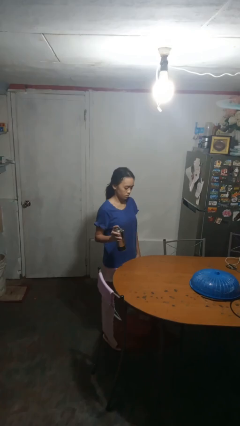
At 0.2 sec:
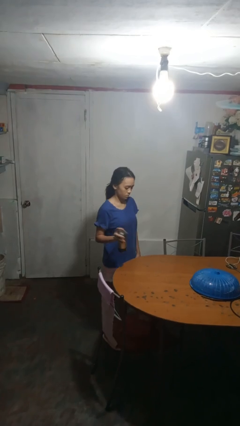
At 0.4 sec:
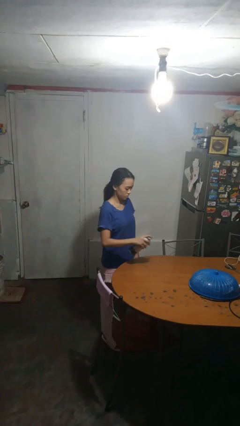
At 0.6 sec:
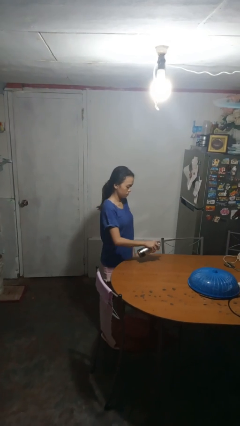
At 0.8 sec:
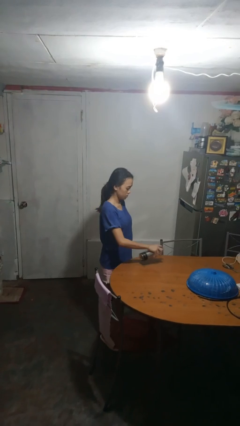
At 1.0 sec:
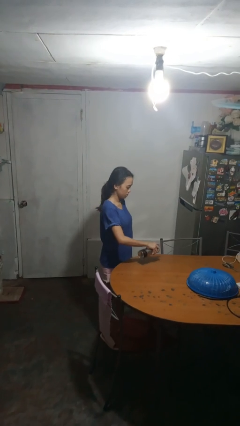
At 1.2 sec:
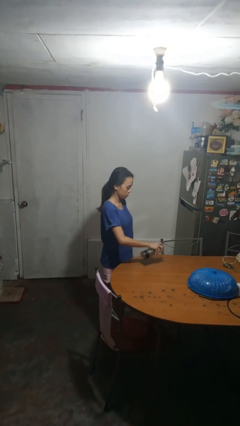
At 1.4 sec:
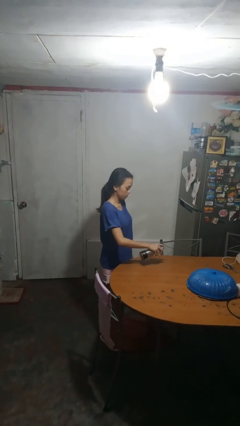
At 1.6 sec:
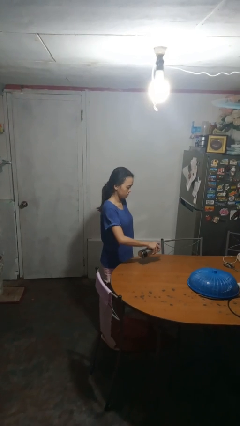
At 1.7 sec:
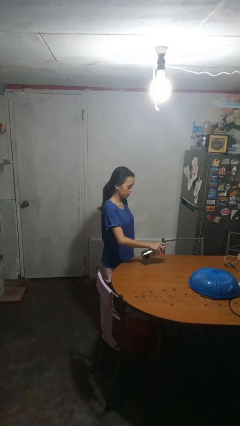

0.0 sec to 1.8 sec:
person sprays from bottle

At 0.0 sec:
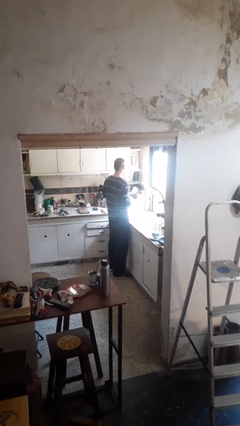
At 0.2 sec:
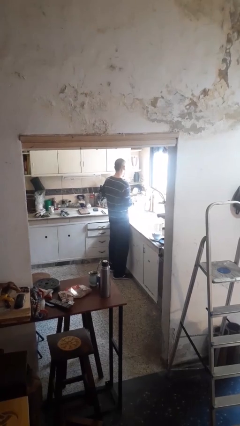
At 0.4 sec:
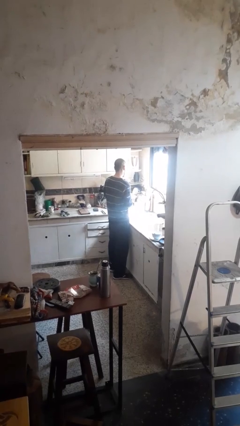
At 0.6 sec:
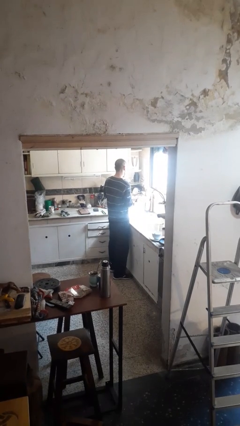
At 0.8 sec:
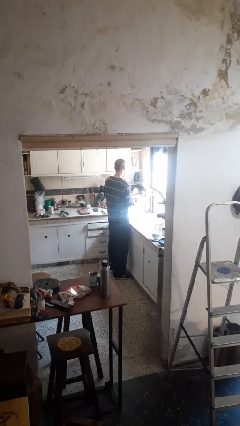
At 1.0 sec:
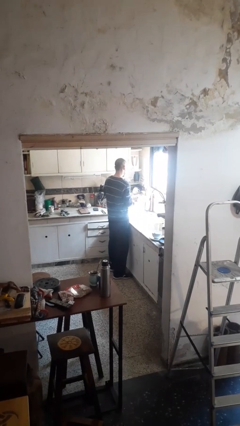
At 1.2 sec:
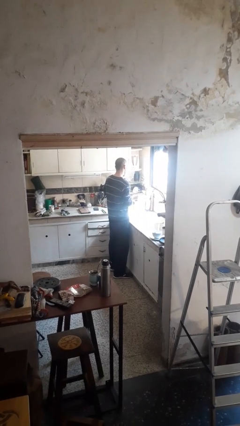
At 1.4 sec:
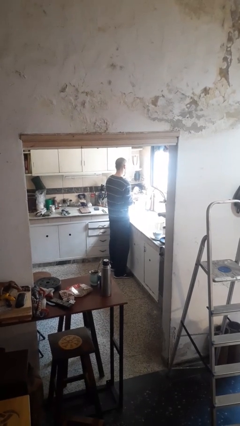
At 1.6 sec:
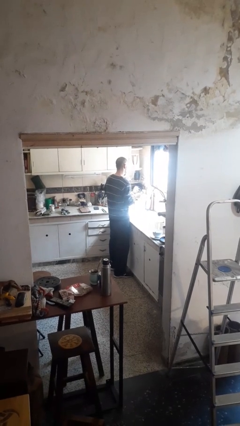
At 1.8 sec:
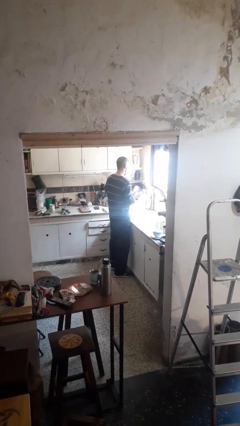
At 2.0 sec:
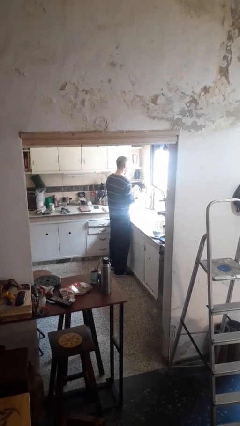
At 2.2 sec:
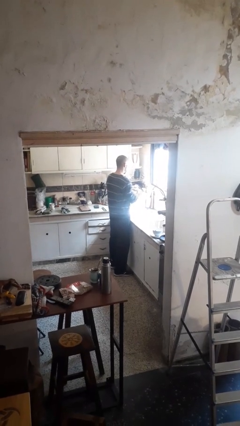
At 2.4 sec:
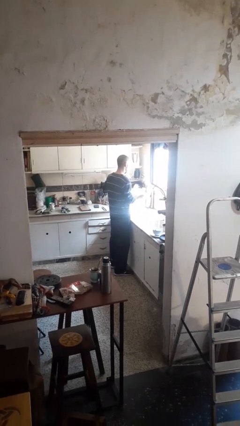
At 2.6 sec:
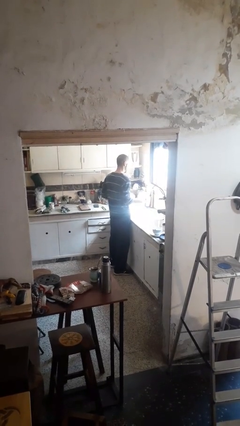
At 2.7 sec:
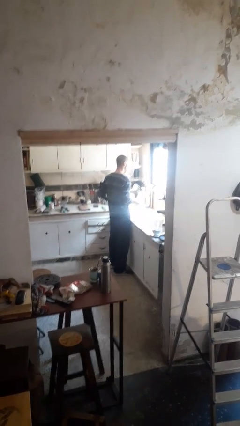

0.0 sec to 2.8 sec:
person washes dish

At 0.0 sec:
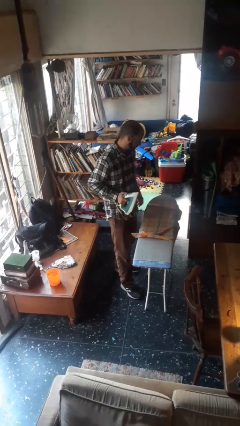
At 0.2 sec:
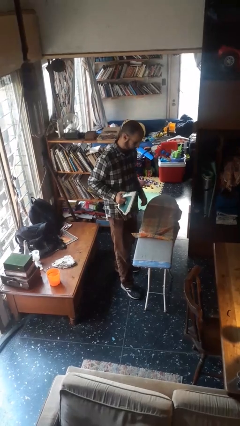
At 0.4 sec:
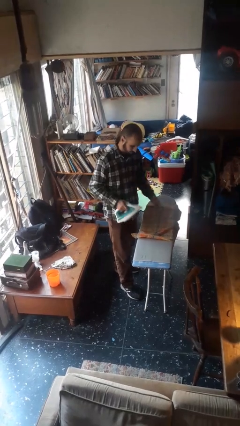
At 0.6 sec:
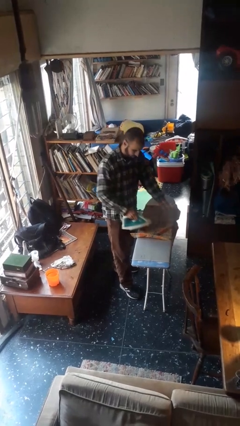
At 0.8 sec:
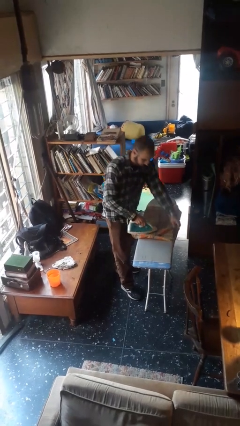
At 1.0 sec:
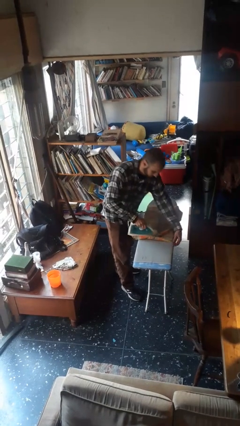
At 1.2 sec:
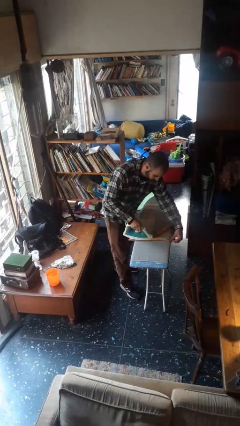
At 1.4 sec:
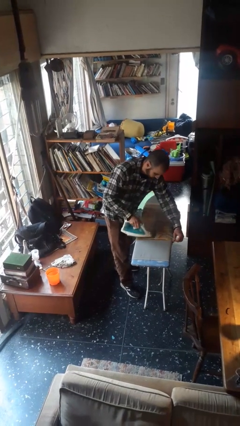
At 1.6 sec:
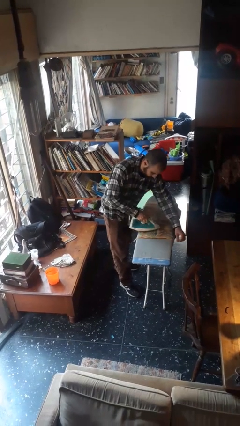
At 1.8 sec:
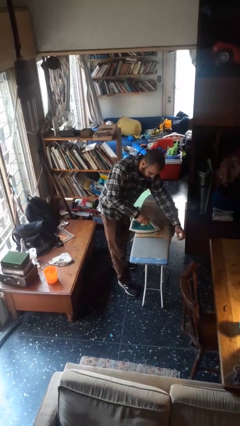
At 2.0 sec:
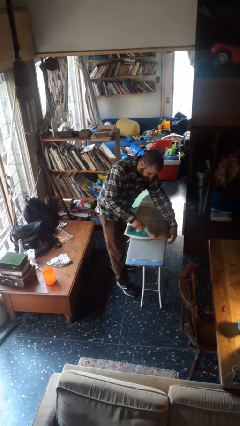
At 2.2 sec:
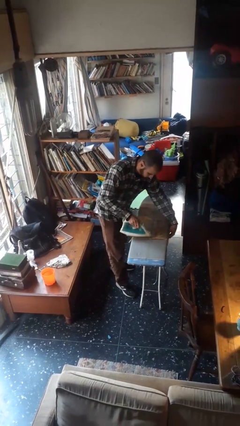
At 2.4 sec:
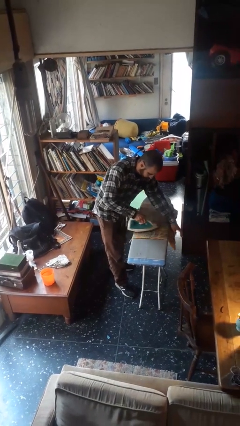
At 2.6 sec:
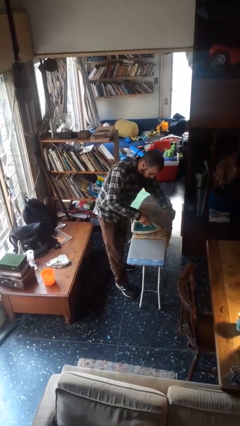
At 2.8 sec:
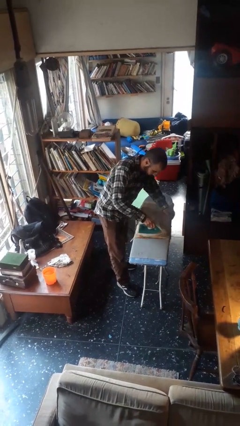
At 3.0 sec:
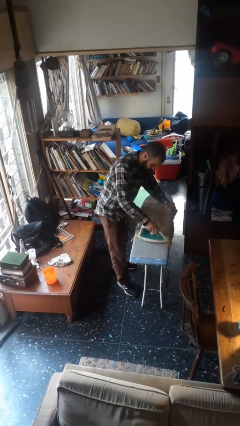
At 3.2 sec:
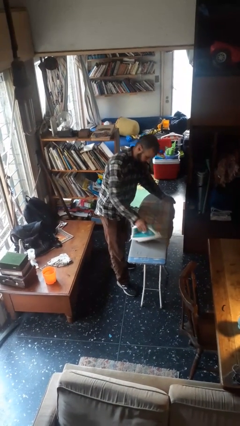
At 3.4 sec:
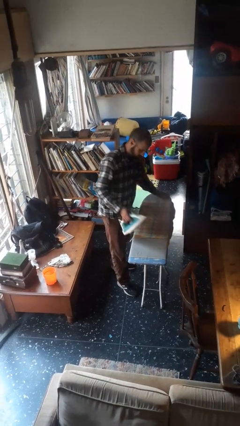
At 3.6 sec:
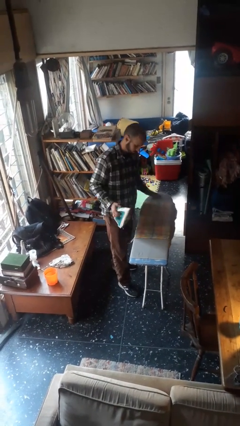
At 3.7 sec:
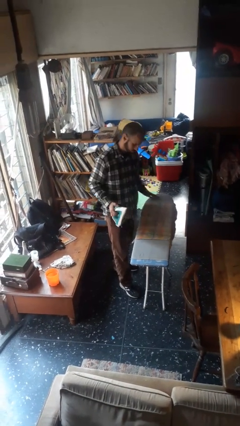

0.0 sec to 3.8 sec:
person irons clothes

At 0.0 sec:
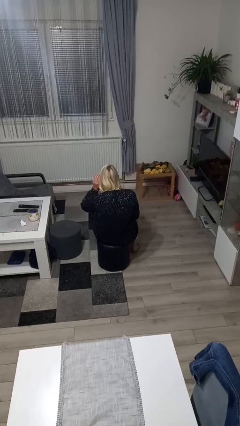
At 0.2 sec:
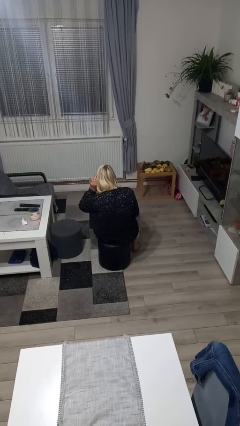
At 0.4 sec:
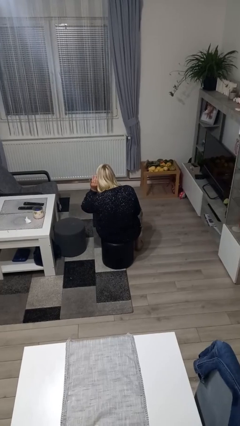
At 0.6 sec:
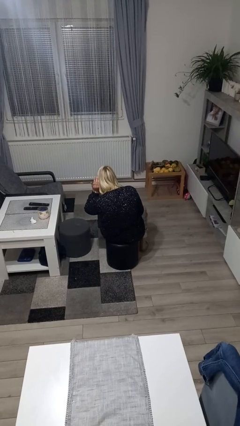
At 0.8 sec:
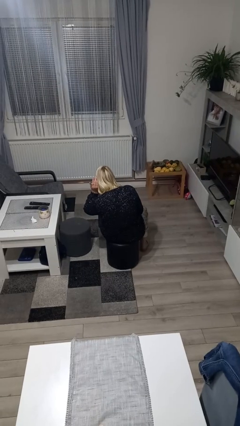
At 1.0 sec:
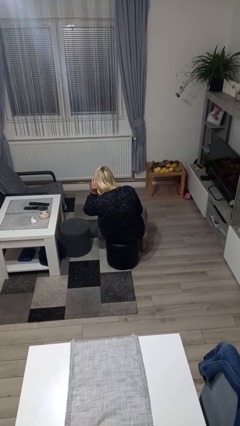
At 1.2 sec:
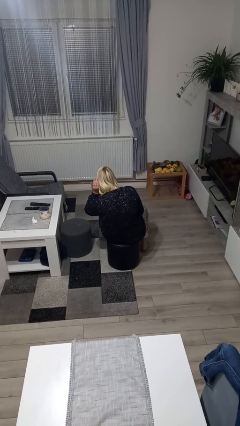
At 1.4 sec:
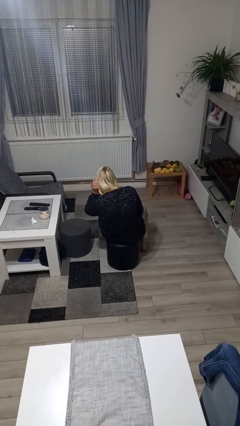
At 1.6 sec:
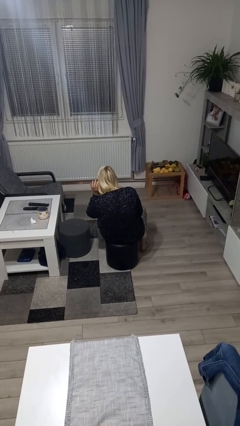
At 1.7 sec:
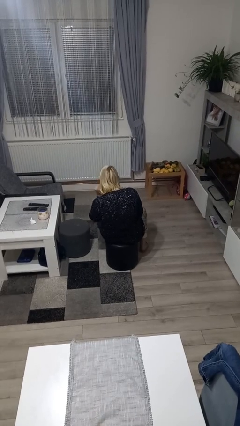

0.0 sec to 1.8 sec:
person gestures listen closely

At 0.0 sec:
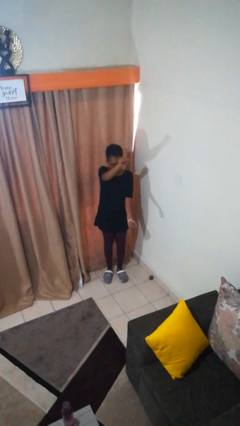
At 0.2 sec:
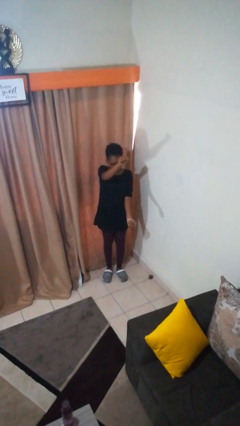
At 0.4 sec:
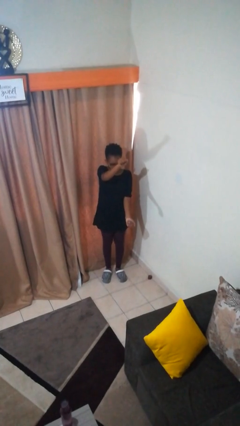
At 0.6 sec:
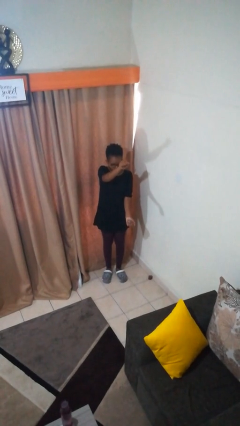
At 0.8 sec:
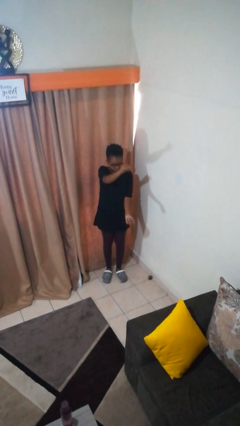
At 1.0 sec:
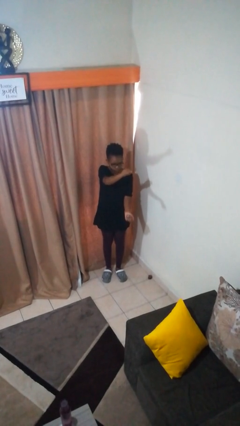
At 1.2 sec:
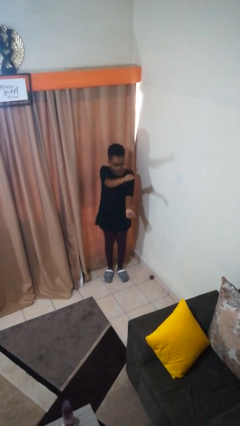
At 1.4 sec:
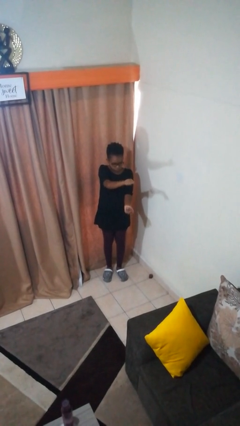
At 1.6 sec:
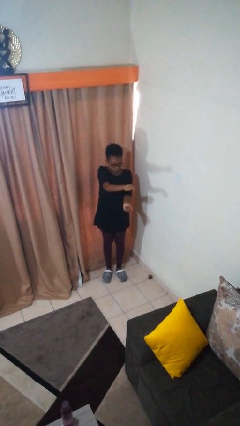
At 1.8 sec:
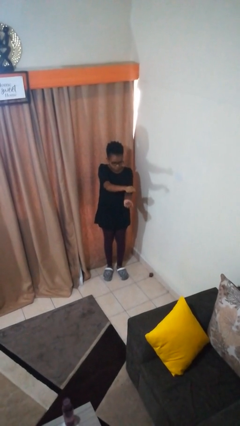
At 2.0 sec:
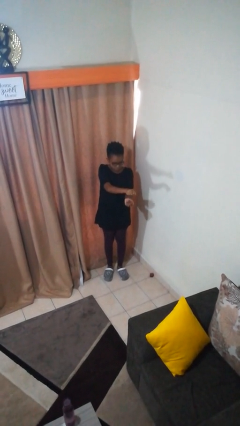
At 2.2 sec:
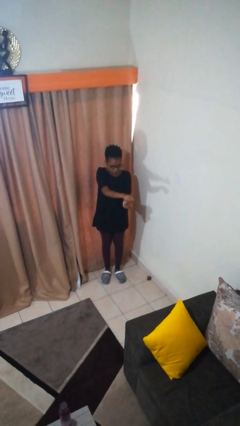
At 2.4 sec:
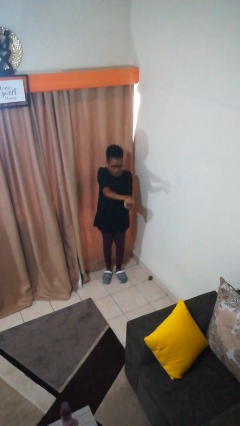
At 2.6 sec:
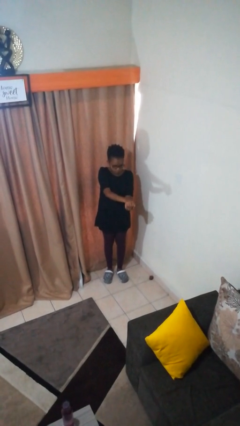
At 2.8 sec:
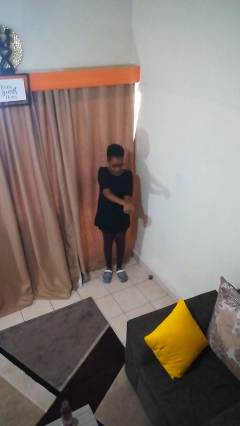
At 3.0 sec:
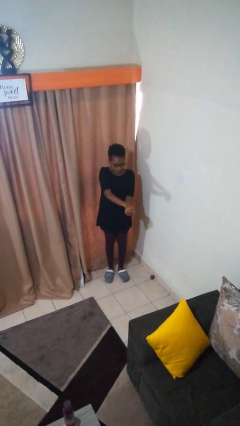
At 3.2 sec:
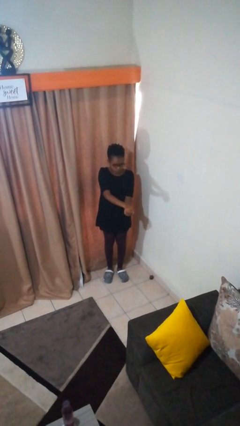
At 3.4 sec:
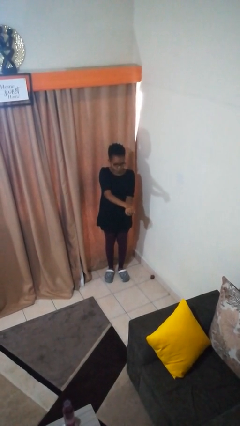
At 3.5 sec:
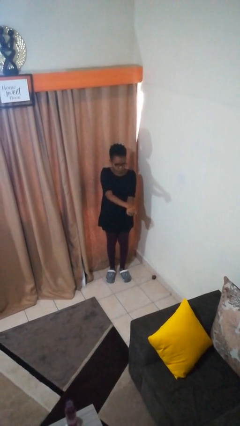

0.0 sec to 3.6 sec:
person gestures zoom out

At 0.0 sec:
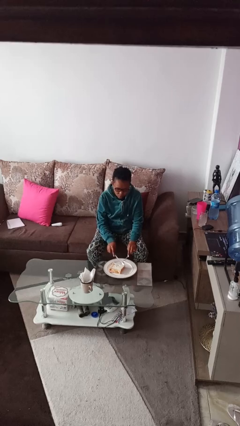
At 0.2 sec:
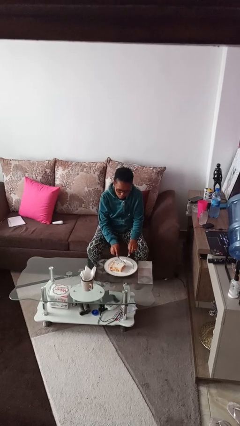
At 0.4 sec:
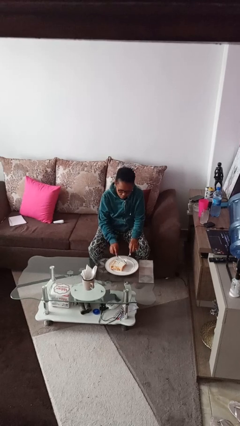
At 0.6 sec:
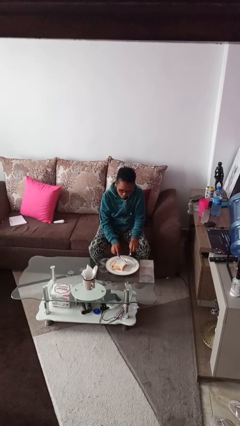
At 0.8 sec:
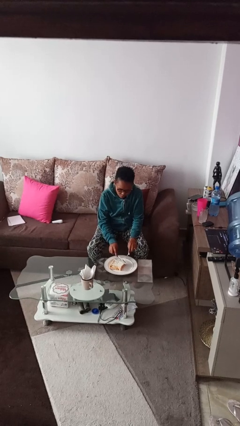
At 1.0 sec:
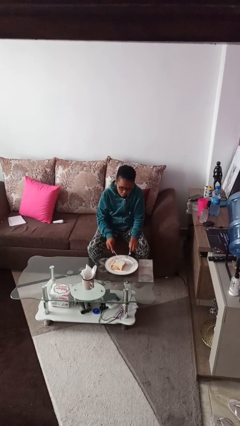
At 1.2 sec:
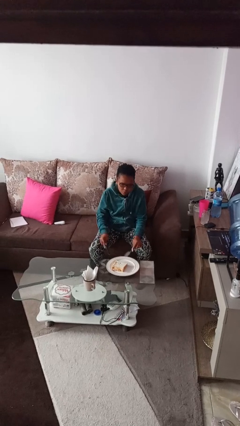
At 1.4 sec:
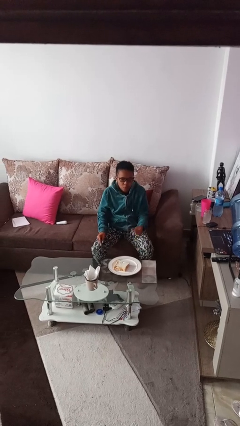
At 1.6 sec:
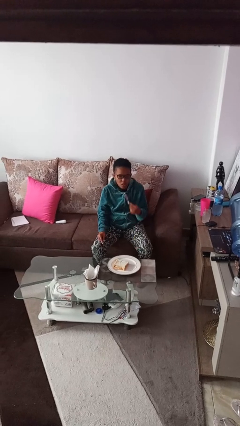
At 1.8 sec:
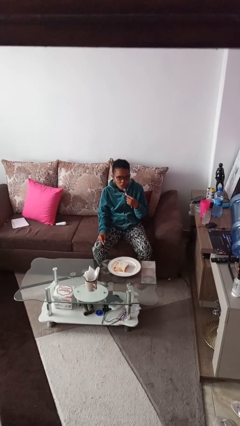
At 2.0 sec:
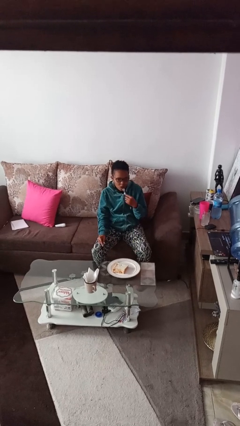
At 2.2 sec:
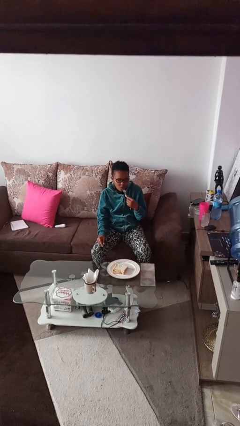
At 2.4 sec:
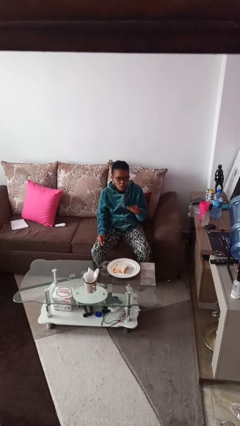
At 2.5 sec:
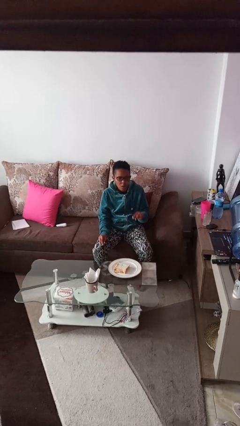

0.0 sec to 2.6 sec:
person eats with utensil

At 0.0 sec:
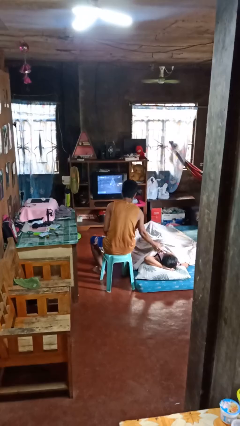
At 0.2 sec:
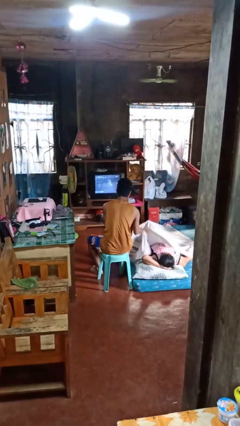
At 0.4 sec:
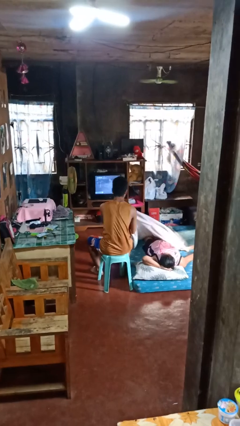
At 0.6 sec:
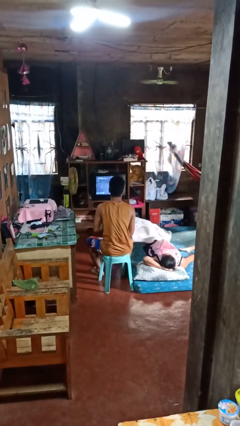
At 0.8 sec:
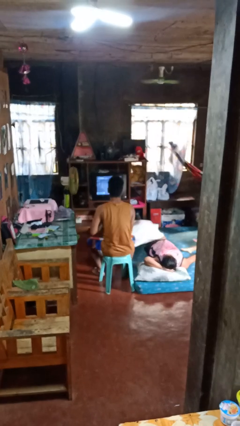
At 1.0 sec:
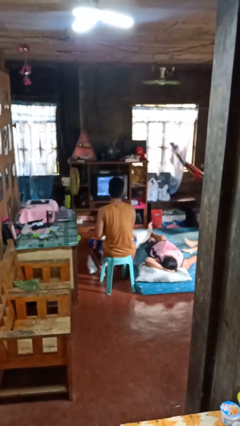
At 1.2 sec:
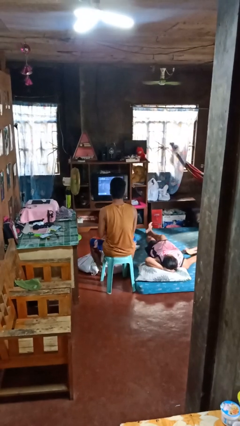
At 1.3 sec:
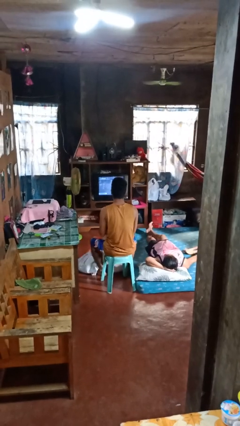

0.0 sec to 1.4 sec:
person uncovers friend with blanket
